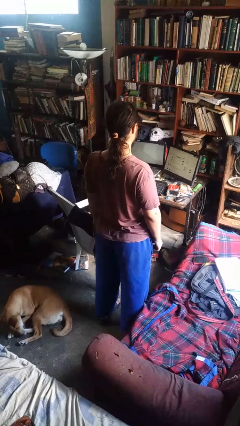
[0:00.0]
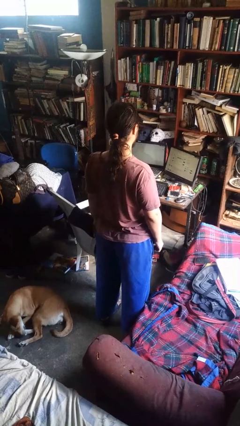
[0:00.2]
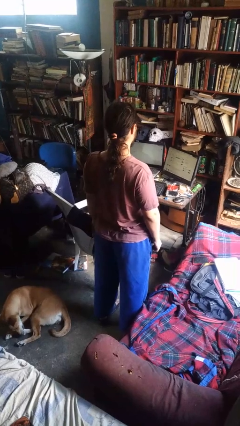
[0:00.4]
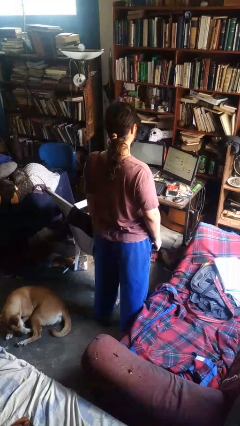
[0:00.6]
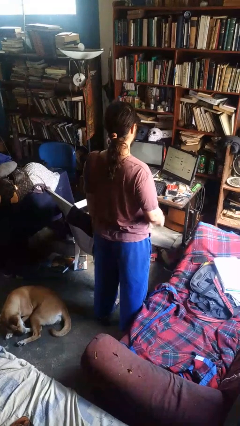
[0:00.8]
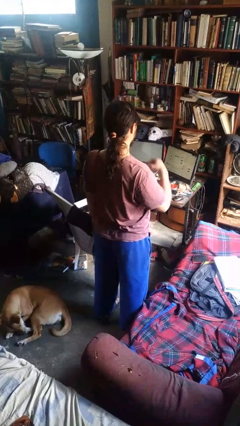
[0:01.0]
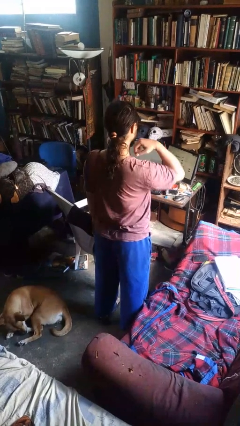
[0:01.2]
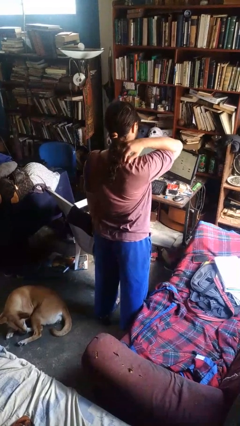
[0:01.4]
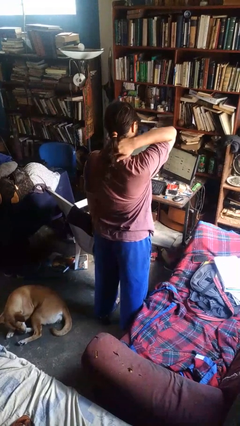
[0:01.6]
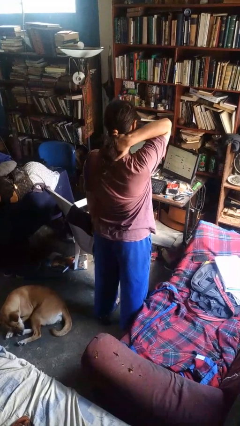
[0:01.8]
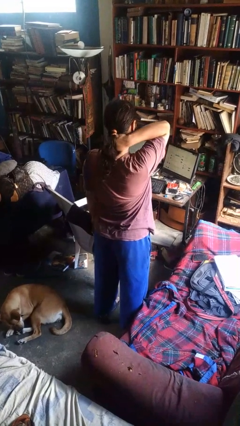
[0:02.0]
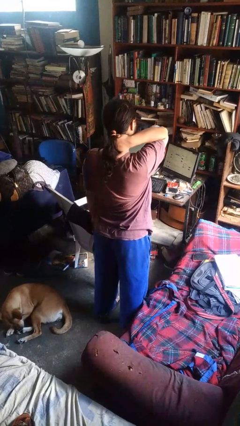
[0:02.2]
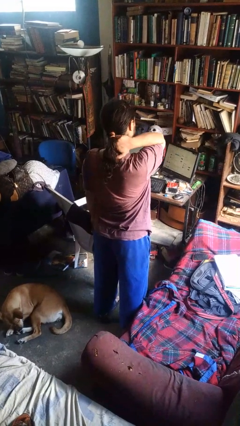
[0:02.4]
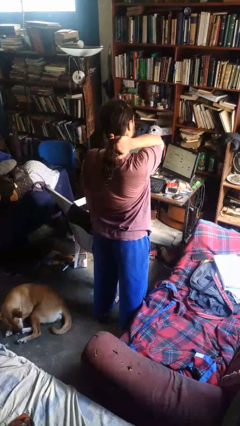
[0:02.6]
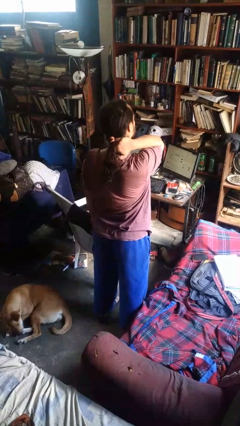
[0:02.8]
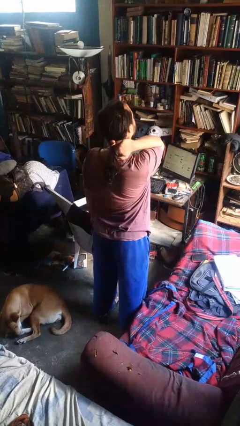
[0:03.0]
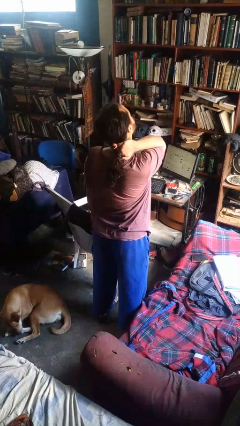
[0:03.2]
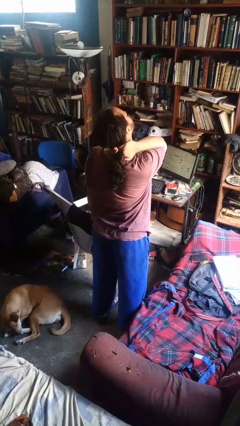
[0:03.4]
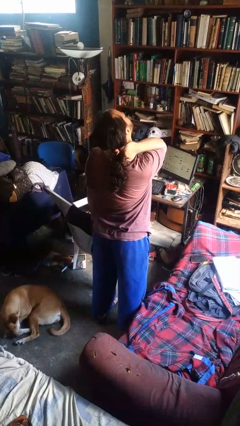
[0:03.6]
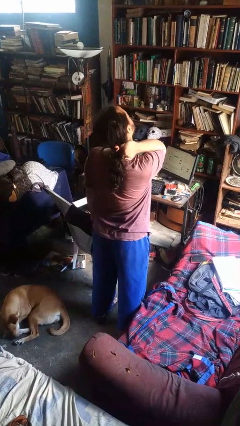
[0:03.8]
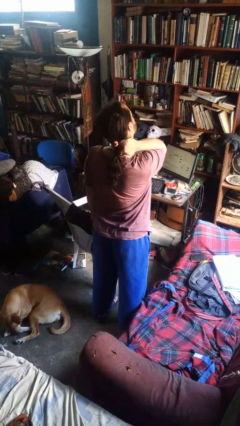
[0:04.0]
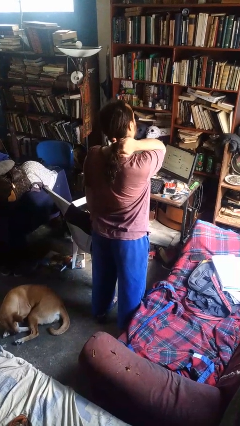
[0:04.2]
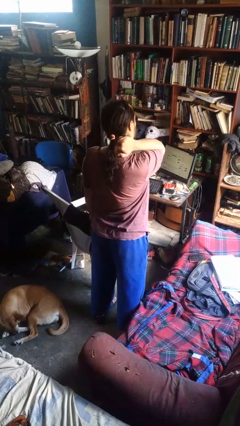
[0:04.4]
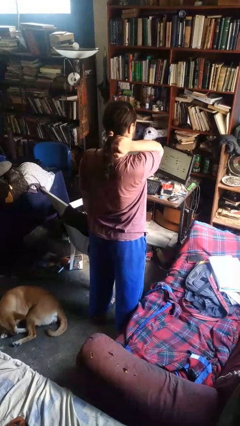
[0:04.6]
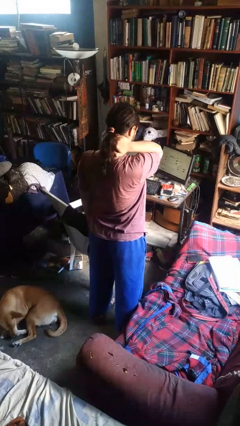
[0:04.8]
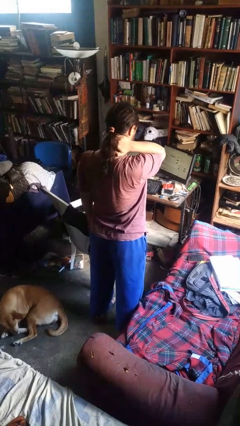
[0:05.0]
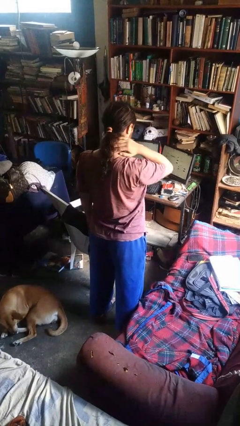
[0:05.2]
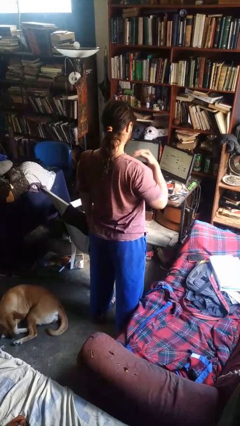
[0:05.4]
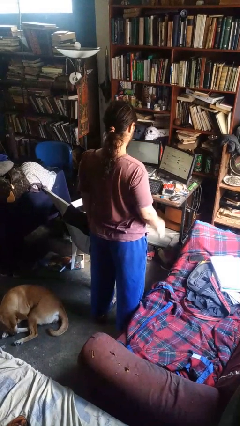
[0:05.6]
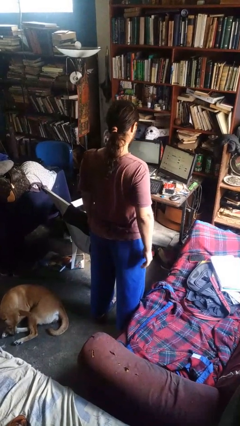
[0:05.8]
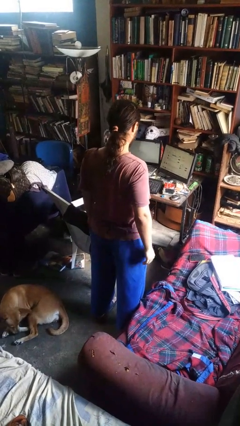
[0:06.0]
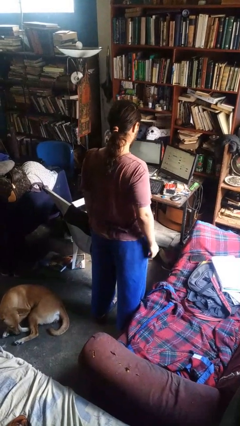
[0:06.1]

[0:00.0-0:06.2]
person rubs neck

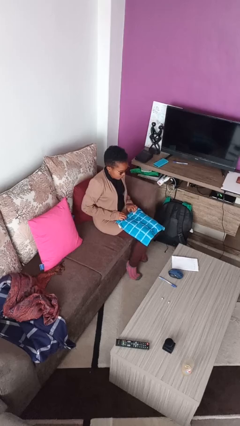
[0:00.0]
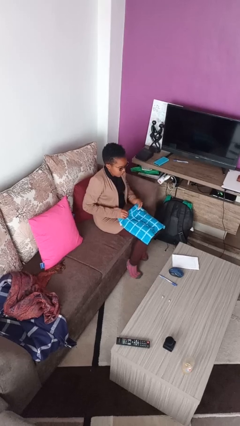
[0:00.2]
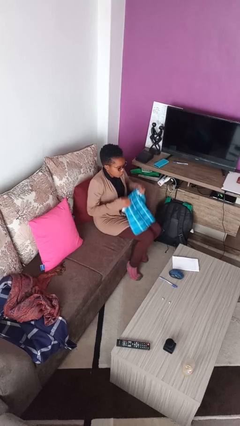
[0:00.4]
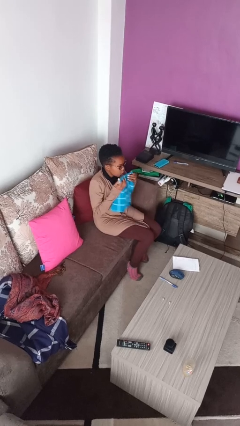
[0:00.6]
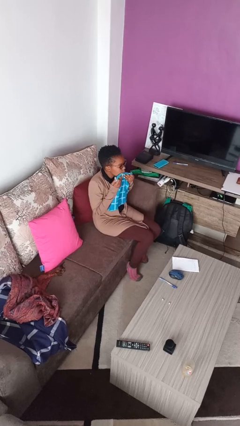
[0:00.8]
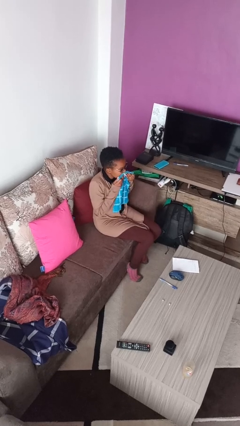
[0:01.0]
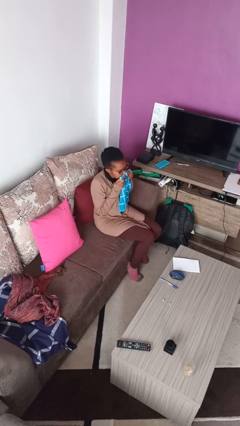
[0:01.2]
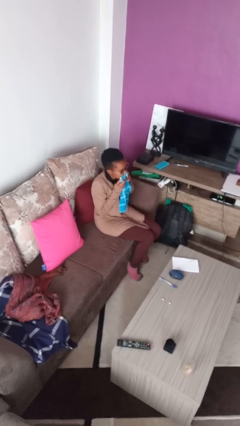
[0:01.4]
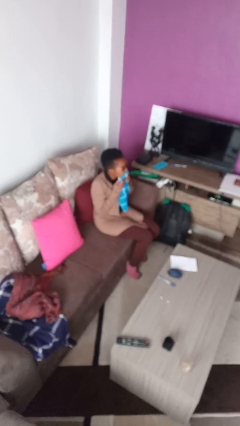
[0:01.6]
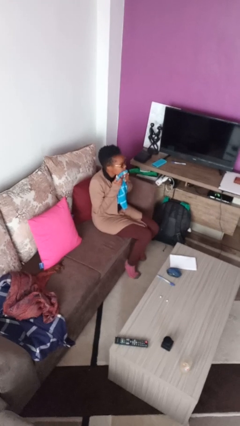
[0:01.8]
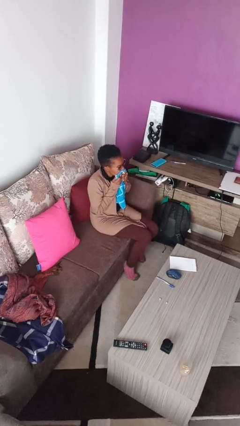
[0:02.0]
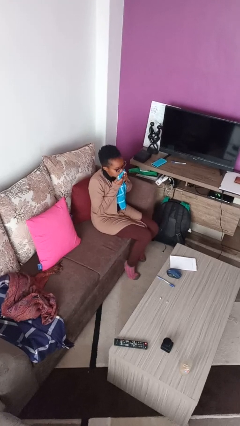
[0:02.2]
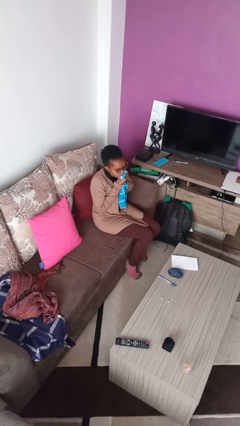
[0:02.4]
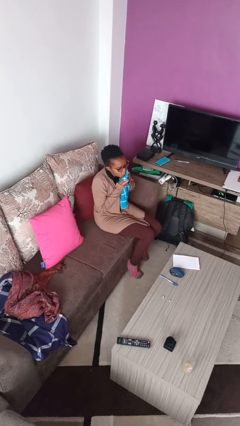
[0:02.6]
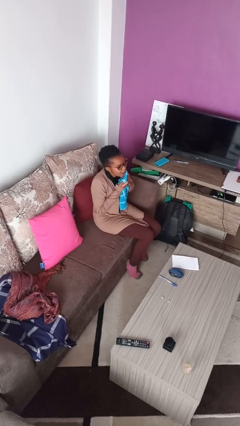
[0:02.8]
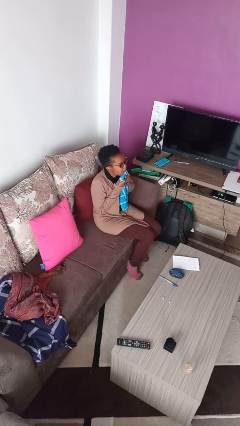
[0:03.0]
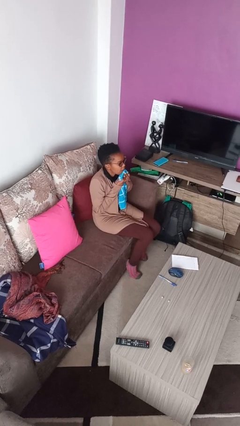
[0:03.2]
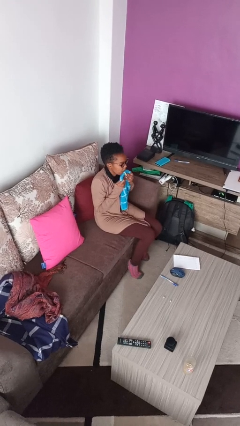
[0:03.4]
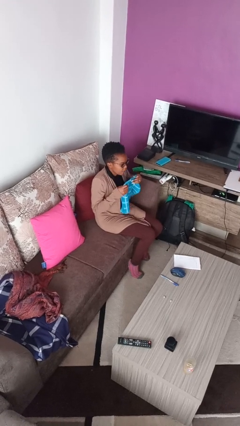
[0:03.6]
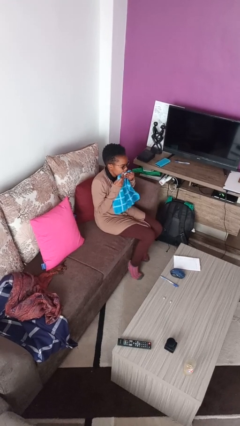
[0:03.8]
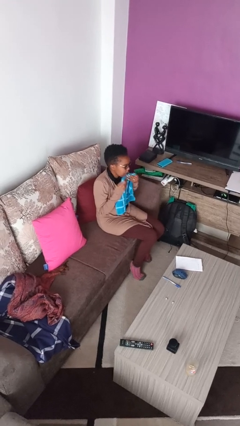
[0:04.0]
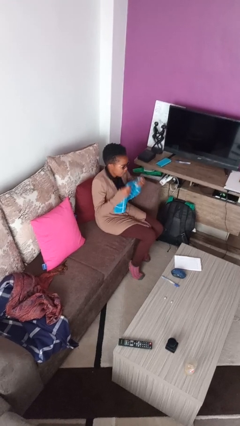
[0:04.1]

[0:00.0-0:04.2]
person wipes mouth with napkin

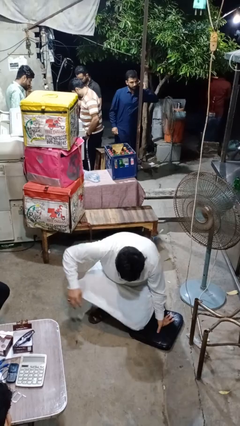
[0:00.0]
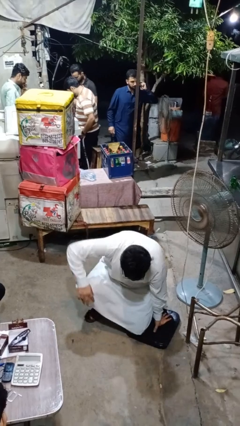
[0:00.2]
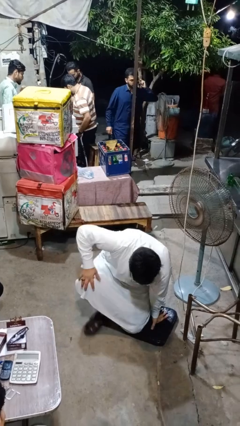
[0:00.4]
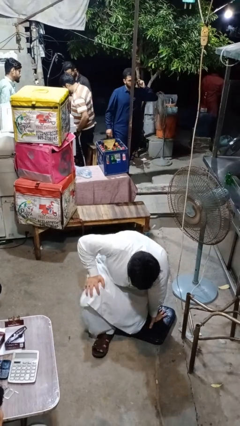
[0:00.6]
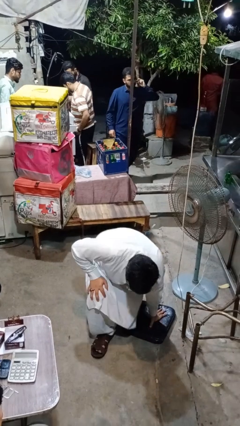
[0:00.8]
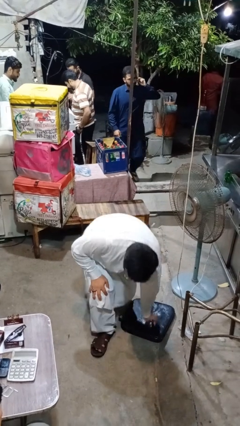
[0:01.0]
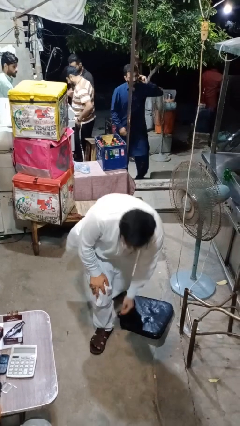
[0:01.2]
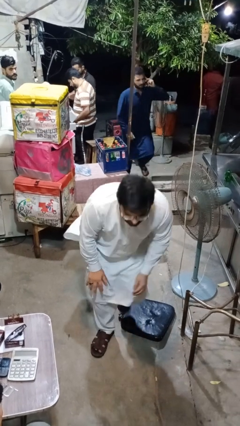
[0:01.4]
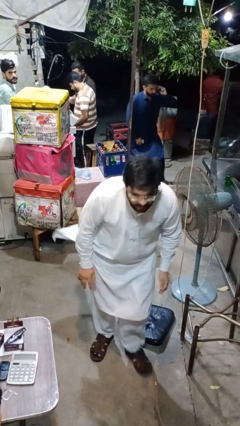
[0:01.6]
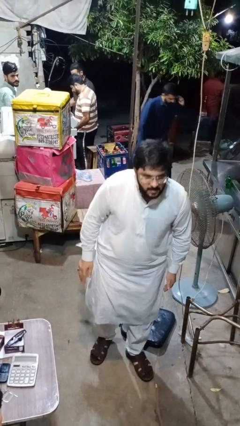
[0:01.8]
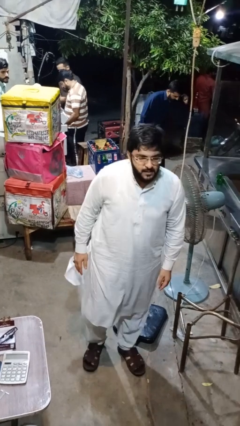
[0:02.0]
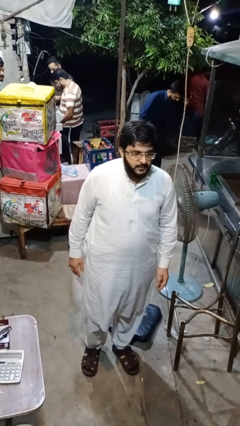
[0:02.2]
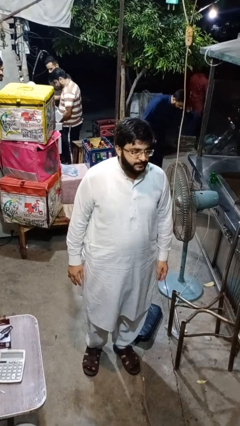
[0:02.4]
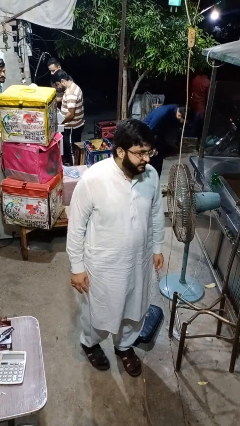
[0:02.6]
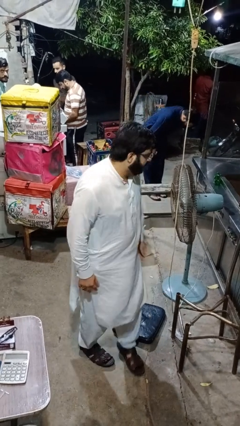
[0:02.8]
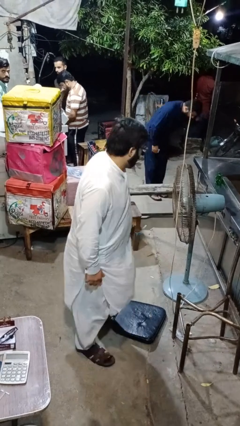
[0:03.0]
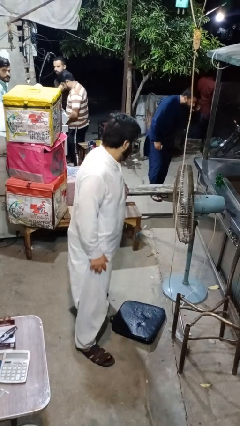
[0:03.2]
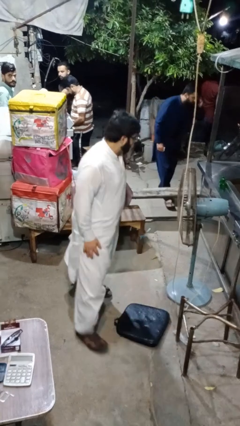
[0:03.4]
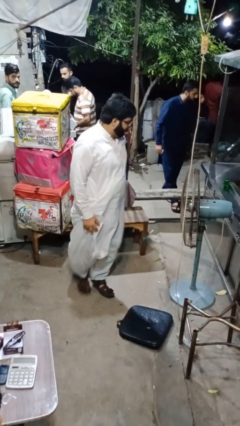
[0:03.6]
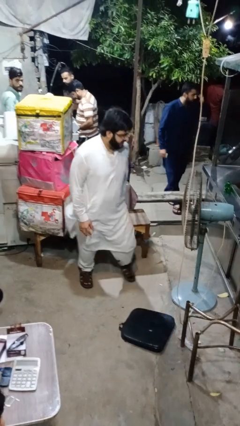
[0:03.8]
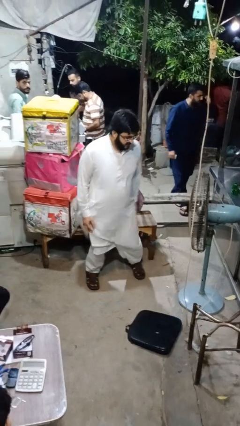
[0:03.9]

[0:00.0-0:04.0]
person stands up from floor

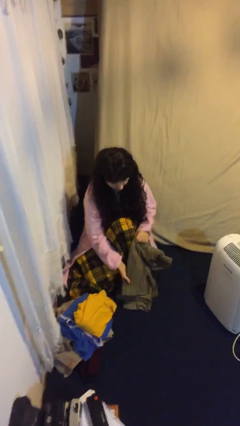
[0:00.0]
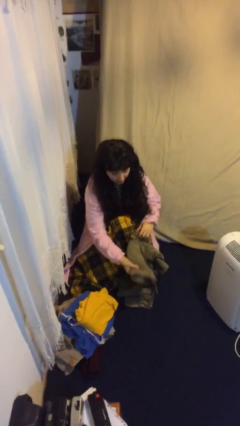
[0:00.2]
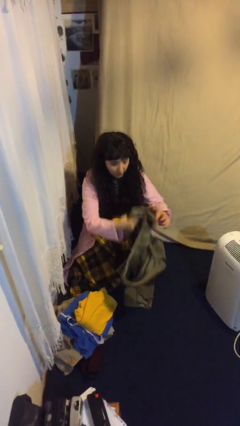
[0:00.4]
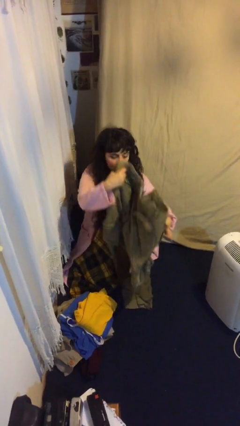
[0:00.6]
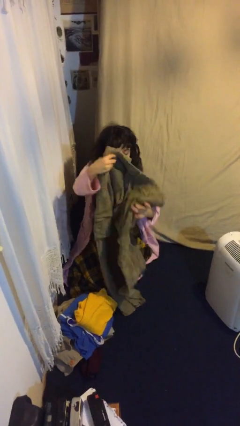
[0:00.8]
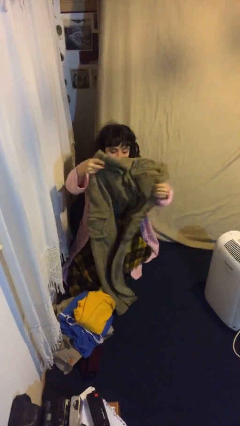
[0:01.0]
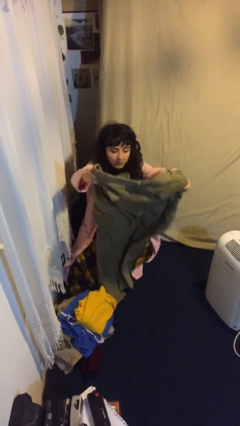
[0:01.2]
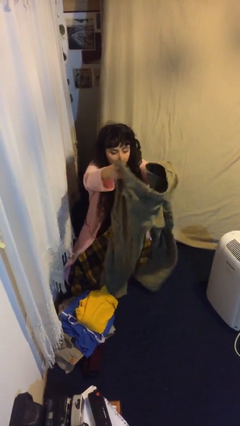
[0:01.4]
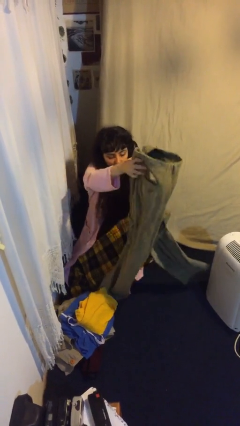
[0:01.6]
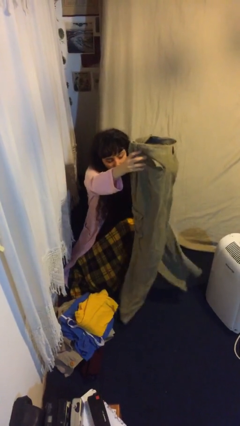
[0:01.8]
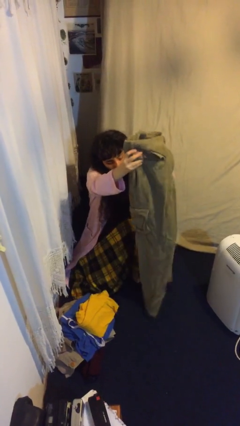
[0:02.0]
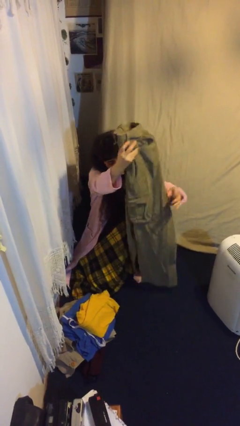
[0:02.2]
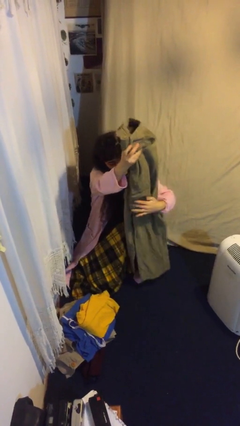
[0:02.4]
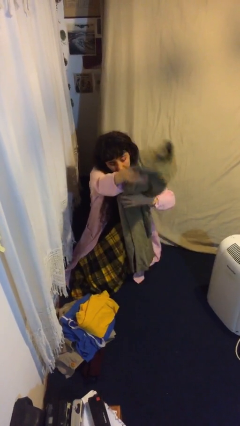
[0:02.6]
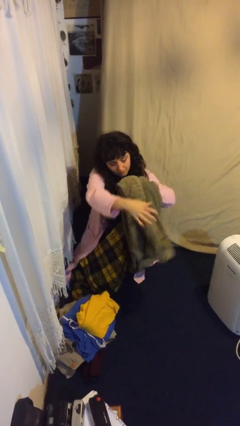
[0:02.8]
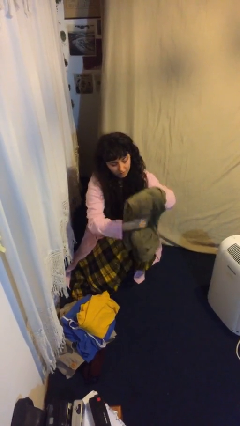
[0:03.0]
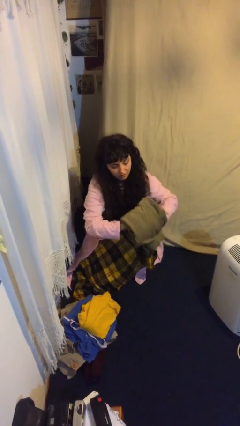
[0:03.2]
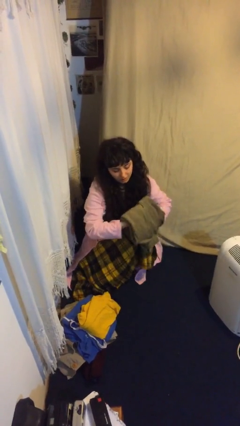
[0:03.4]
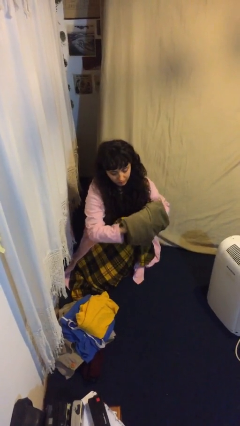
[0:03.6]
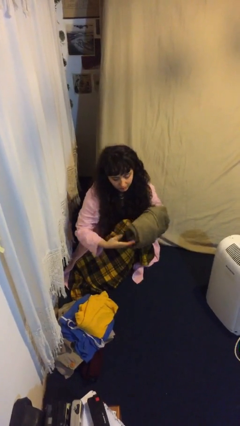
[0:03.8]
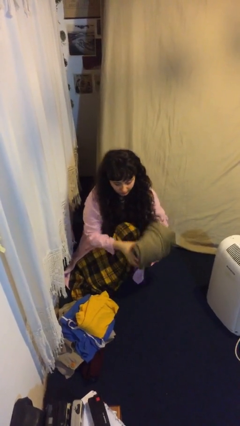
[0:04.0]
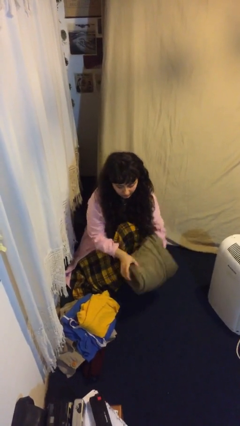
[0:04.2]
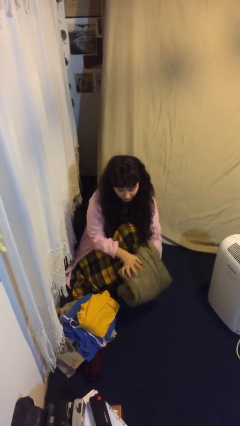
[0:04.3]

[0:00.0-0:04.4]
person folds pants
